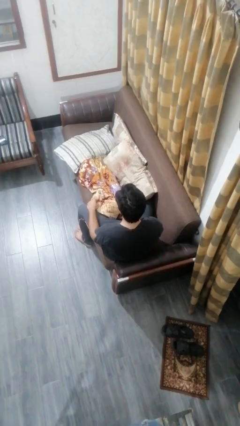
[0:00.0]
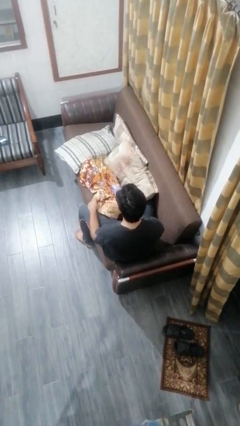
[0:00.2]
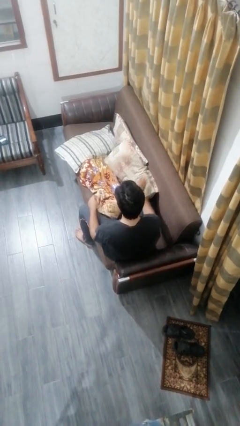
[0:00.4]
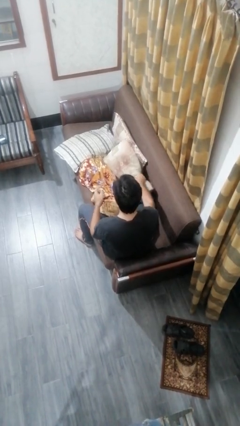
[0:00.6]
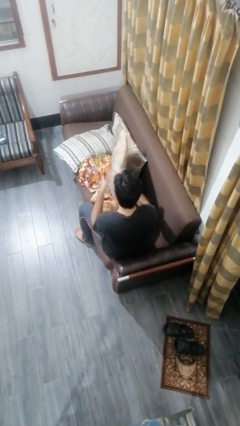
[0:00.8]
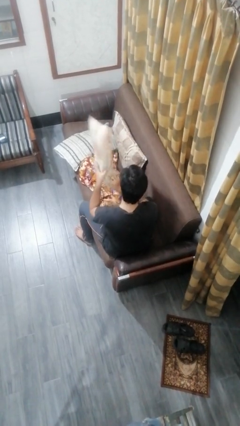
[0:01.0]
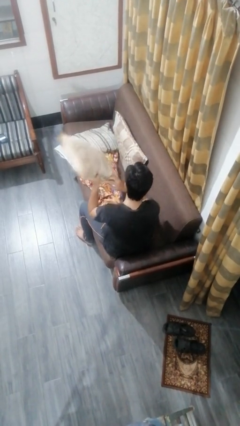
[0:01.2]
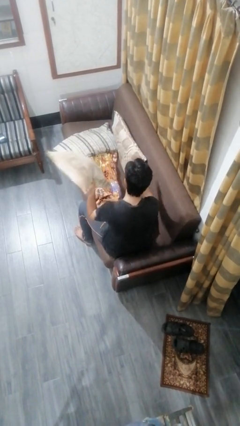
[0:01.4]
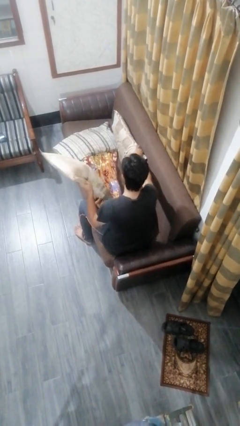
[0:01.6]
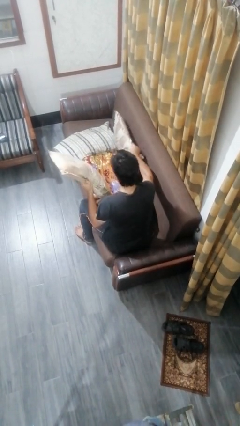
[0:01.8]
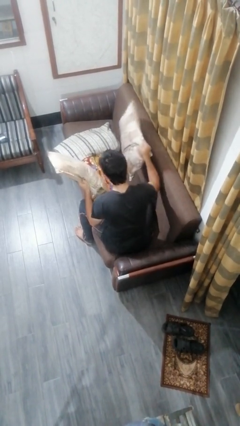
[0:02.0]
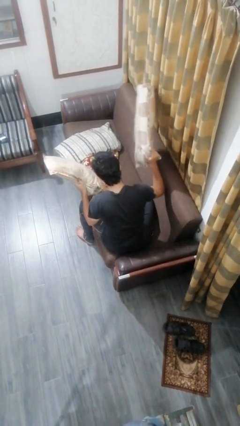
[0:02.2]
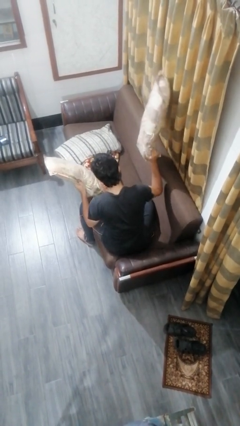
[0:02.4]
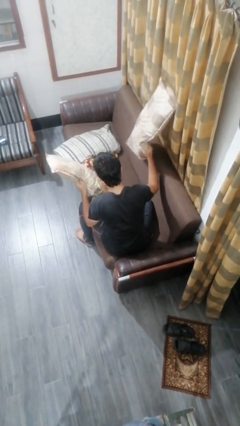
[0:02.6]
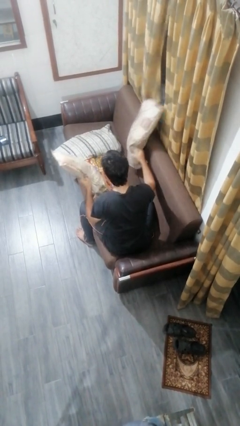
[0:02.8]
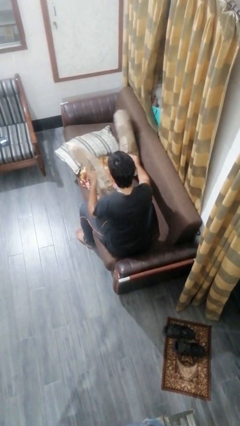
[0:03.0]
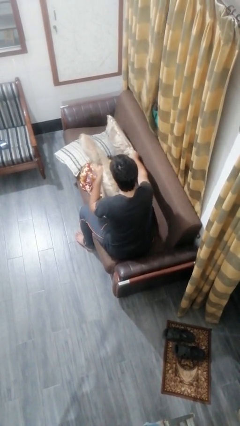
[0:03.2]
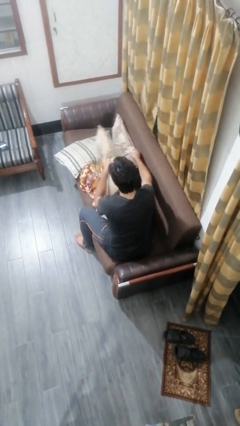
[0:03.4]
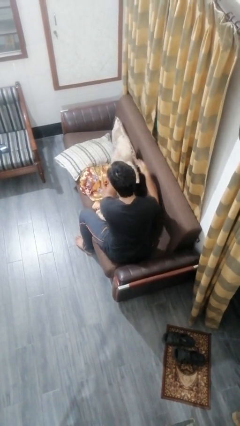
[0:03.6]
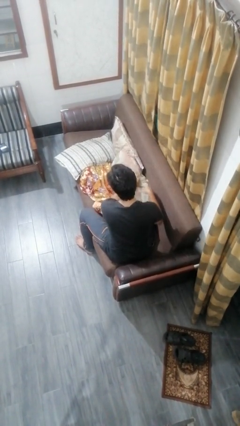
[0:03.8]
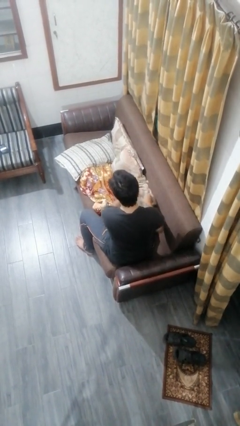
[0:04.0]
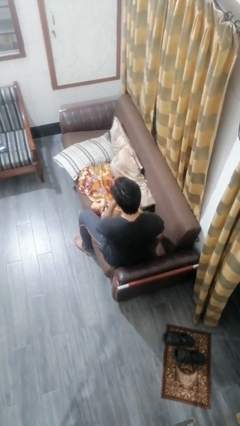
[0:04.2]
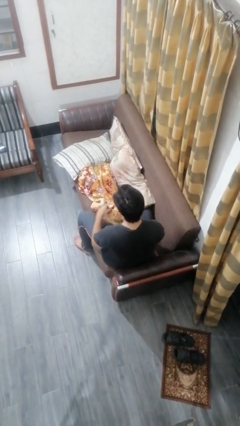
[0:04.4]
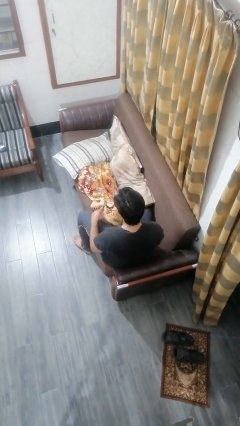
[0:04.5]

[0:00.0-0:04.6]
person searches in couch

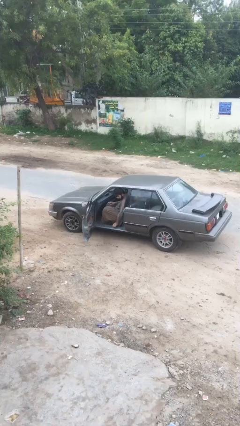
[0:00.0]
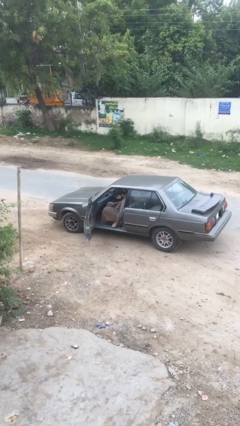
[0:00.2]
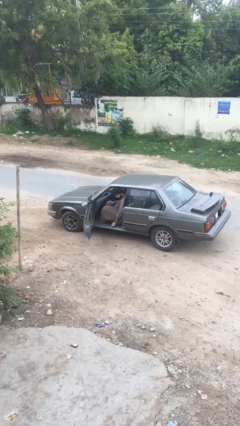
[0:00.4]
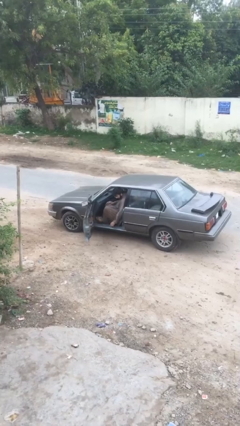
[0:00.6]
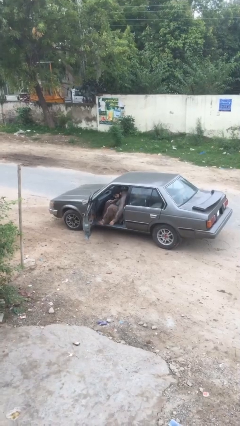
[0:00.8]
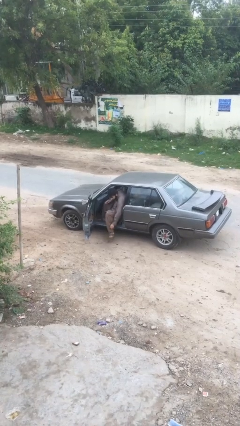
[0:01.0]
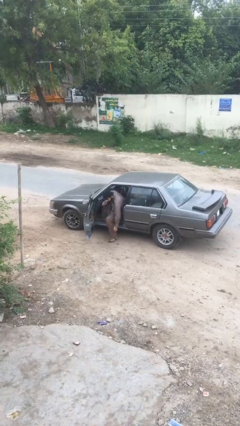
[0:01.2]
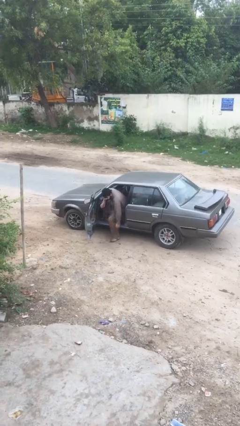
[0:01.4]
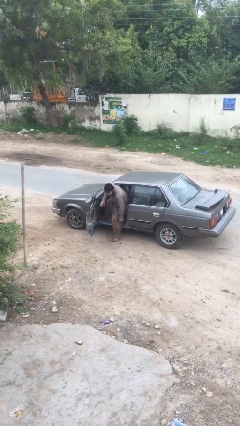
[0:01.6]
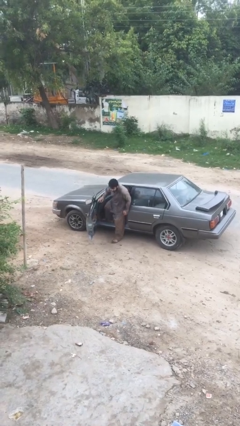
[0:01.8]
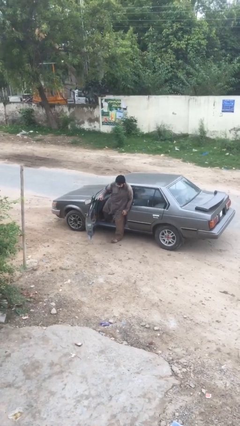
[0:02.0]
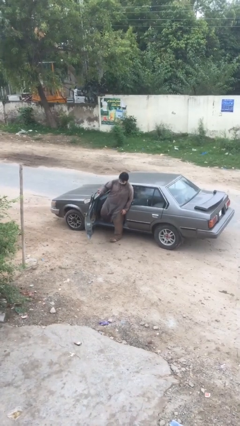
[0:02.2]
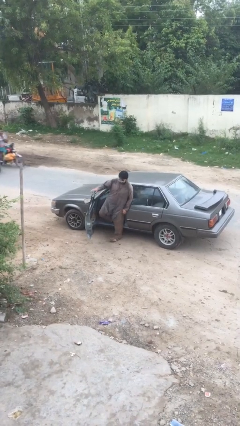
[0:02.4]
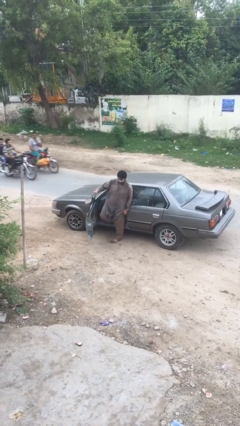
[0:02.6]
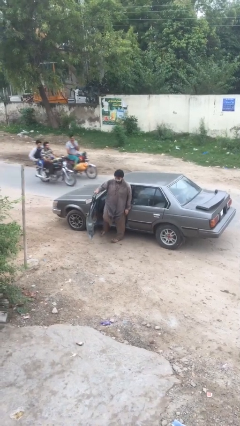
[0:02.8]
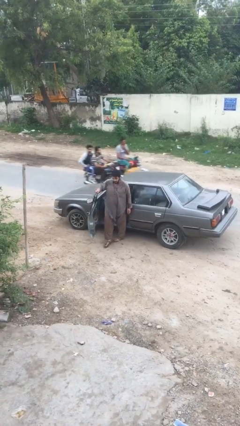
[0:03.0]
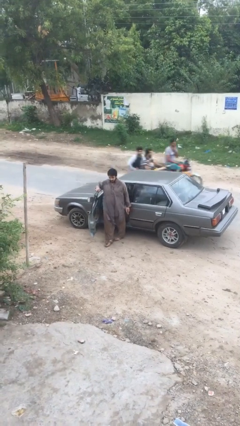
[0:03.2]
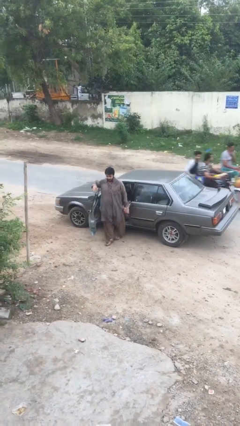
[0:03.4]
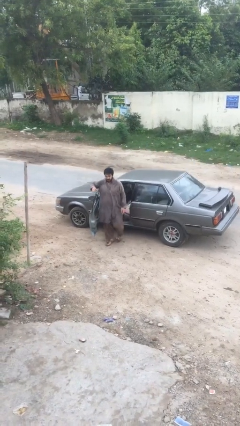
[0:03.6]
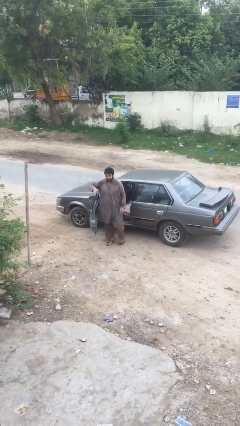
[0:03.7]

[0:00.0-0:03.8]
person exits car

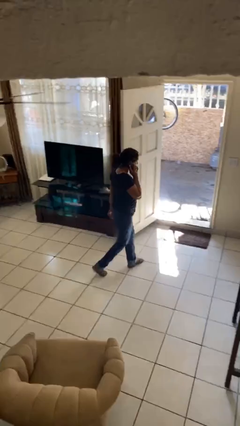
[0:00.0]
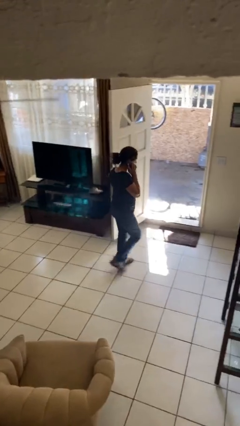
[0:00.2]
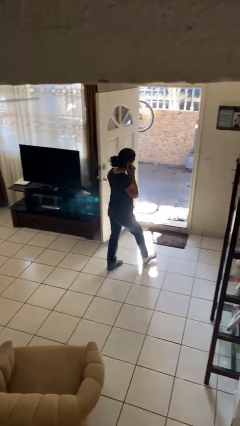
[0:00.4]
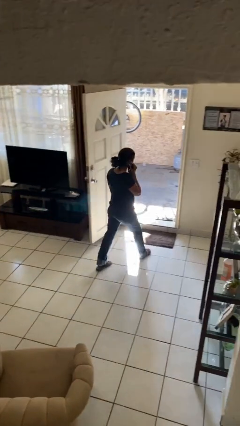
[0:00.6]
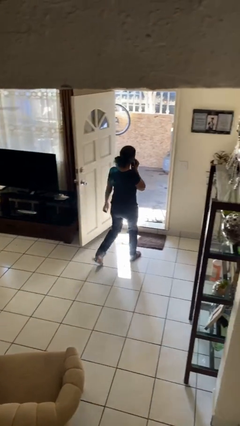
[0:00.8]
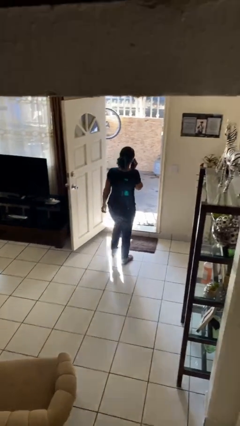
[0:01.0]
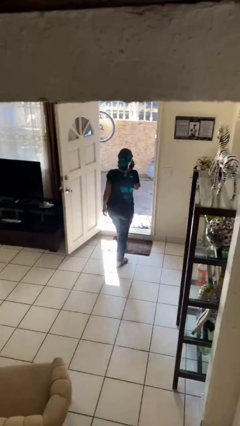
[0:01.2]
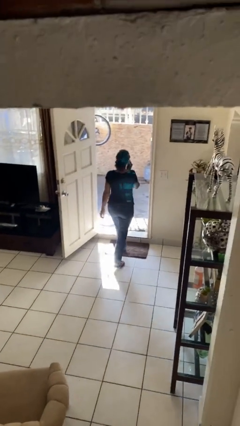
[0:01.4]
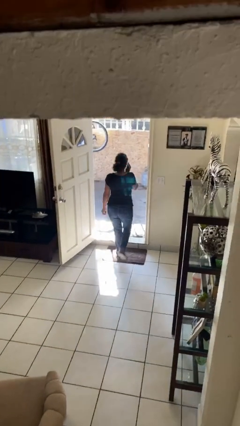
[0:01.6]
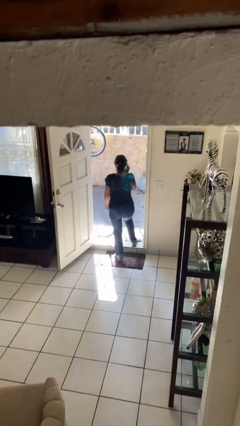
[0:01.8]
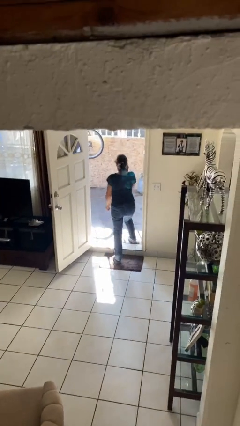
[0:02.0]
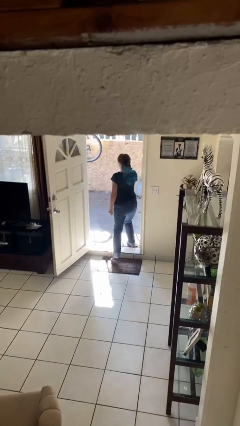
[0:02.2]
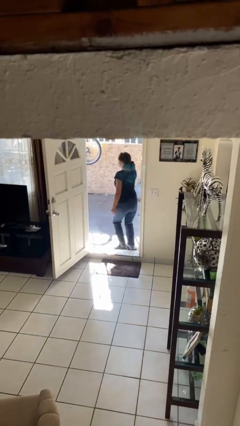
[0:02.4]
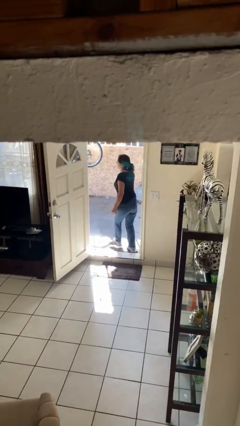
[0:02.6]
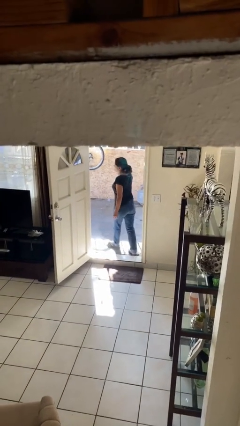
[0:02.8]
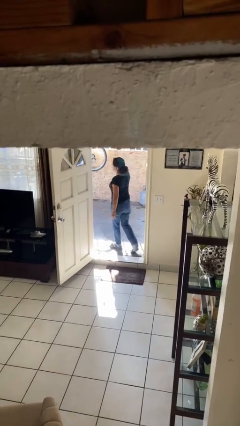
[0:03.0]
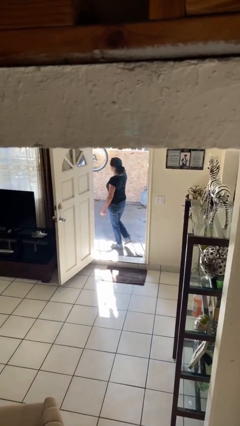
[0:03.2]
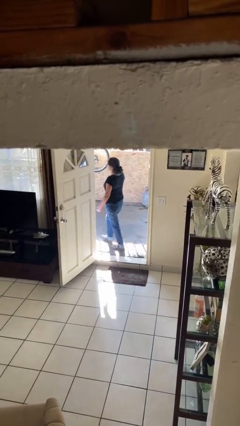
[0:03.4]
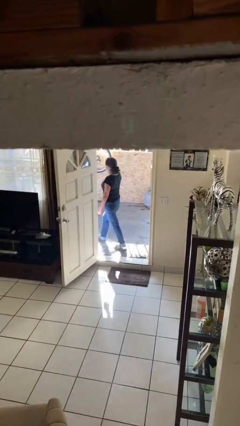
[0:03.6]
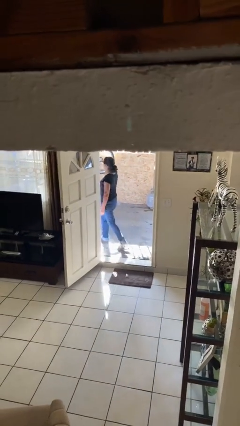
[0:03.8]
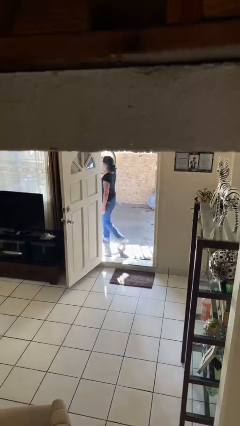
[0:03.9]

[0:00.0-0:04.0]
person exits scene through structure

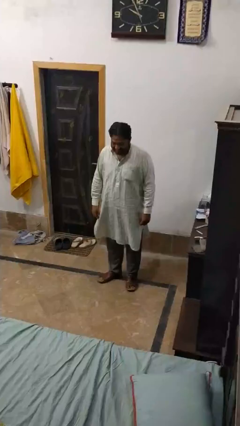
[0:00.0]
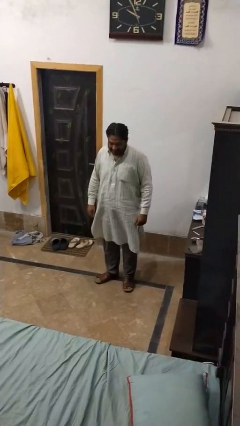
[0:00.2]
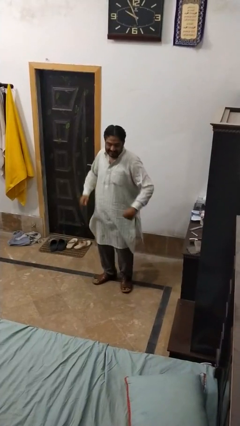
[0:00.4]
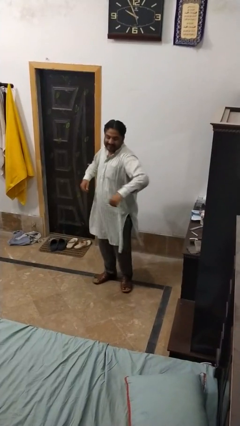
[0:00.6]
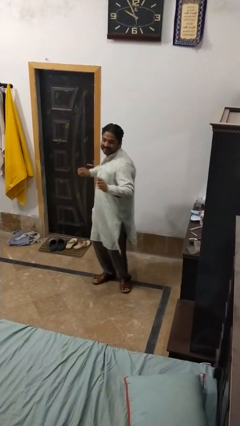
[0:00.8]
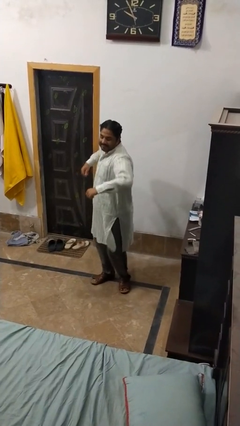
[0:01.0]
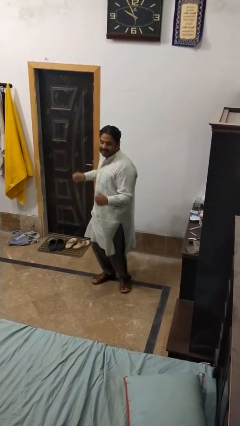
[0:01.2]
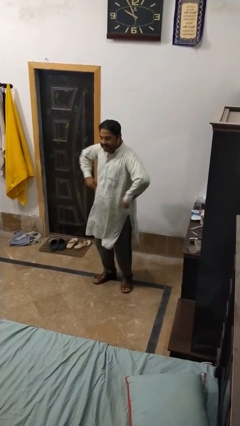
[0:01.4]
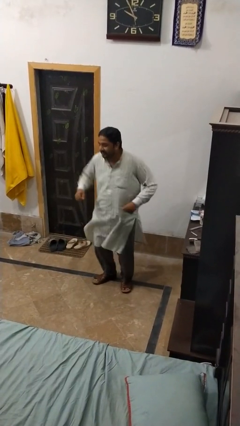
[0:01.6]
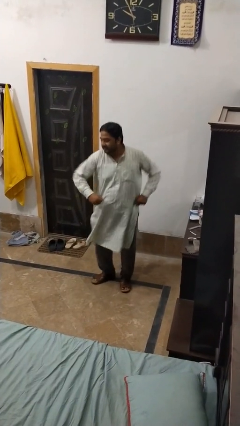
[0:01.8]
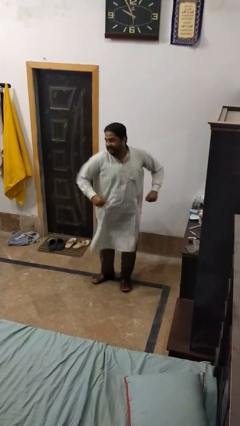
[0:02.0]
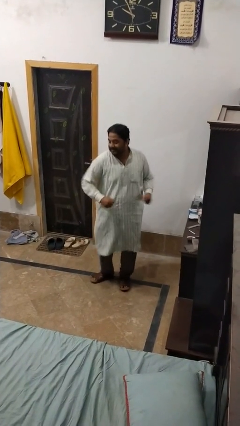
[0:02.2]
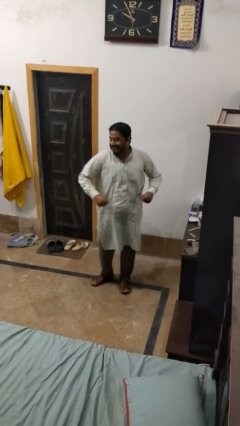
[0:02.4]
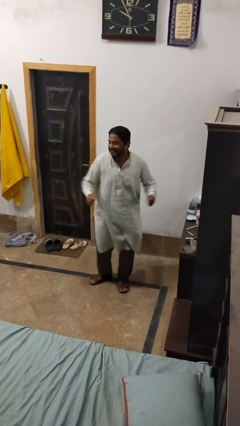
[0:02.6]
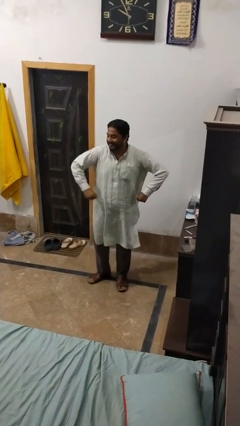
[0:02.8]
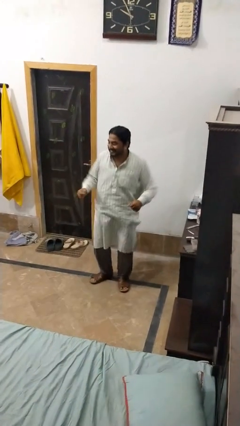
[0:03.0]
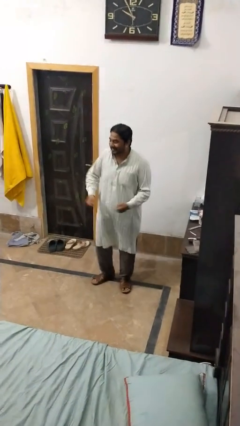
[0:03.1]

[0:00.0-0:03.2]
person dances in place

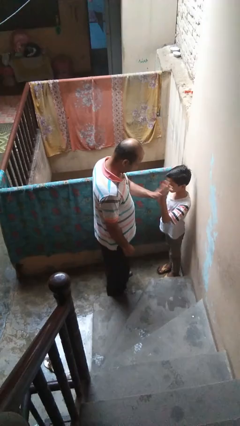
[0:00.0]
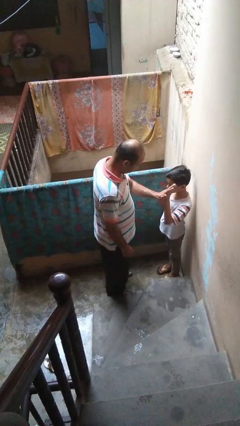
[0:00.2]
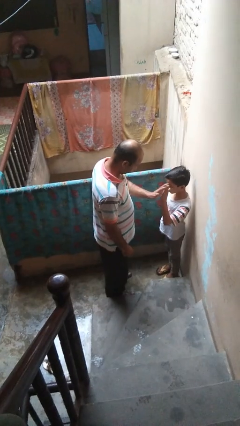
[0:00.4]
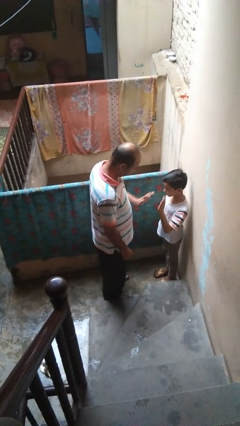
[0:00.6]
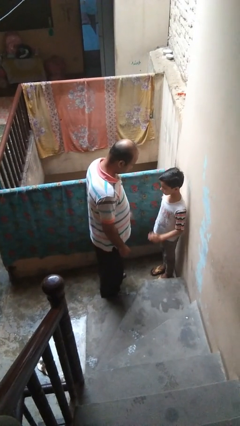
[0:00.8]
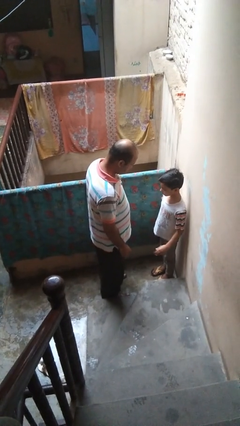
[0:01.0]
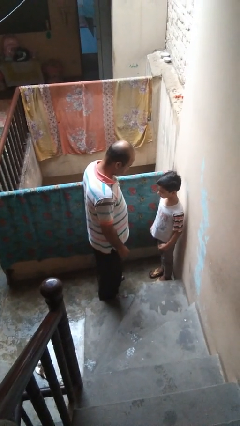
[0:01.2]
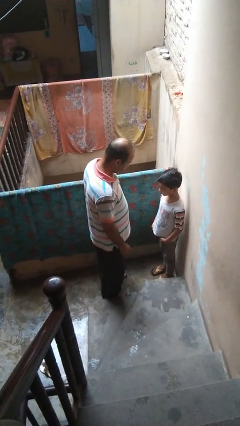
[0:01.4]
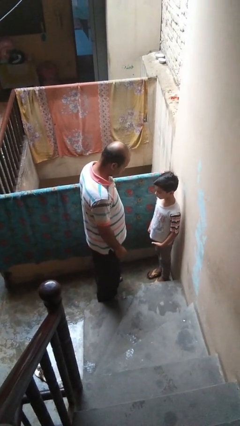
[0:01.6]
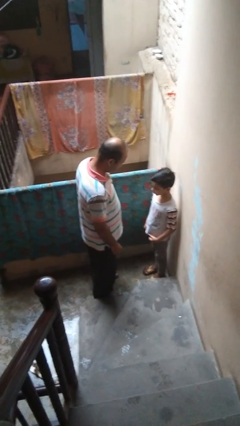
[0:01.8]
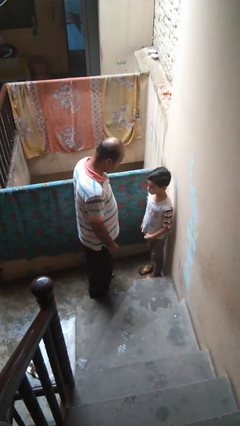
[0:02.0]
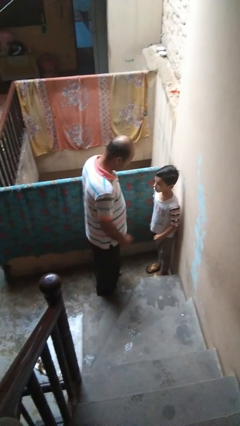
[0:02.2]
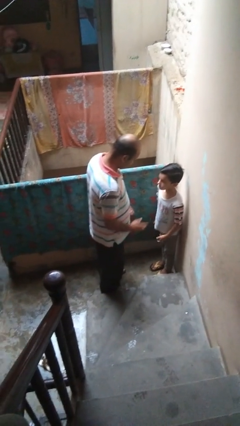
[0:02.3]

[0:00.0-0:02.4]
person highfives hand
